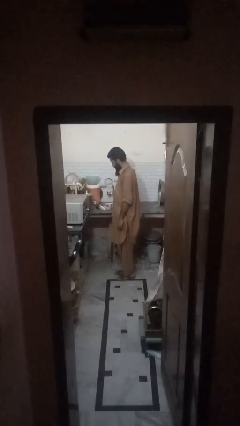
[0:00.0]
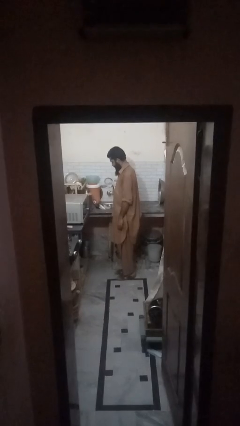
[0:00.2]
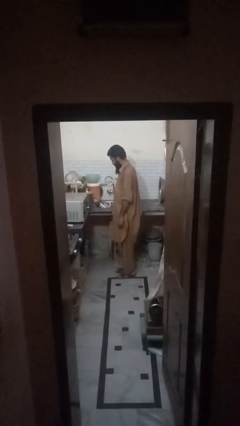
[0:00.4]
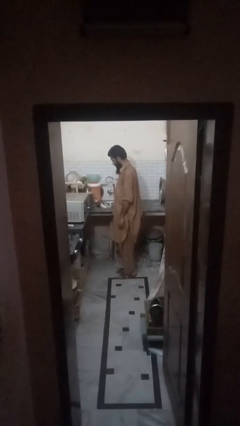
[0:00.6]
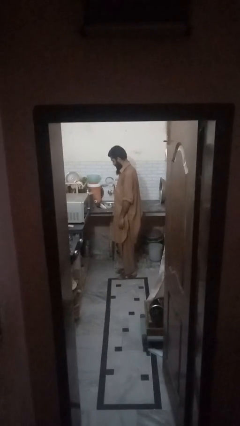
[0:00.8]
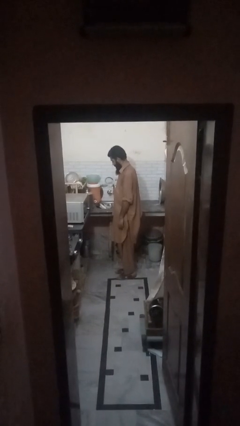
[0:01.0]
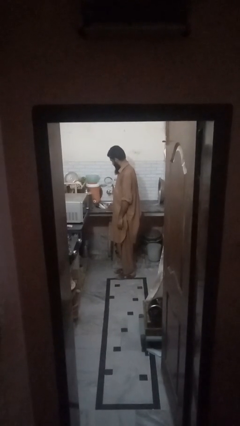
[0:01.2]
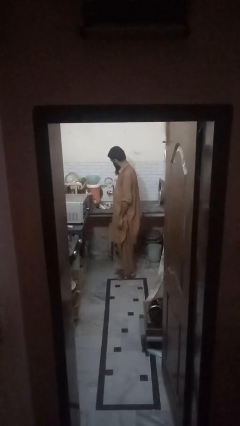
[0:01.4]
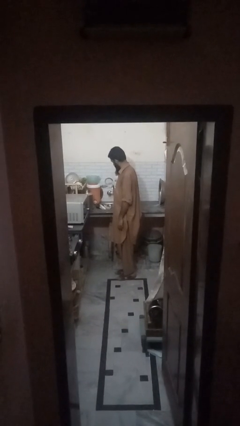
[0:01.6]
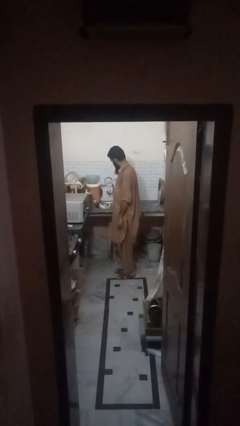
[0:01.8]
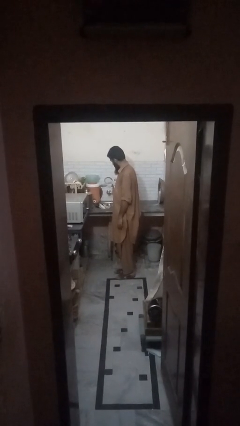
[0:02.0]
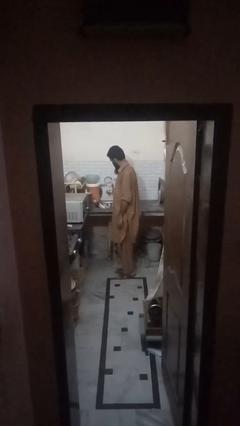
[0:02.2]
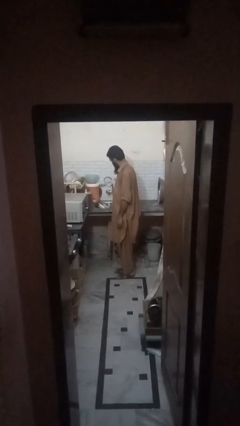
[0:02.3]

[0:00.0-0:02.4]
person closes dishwasher

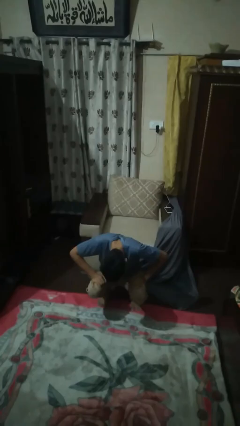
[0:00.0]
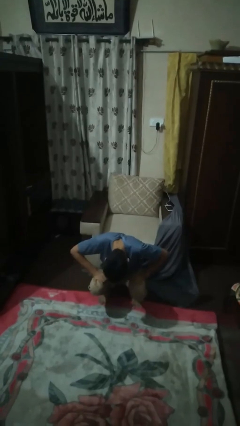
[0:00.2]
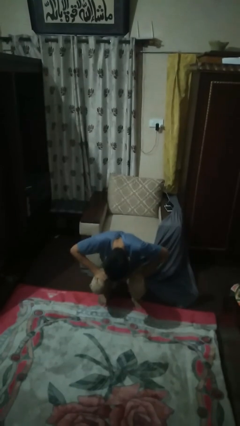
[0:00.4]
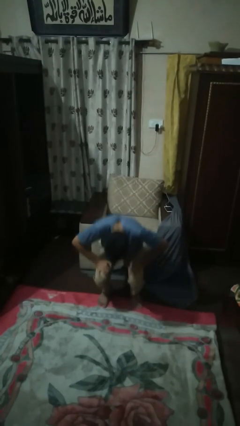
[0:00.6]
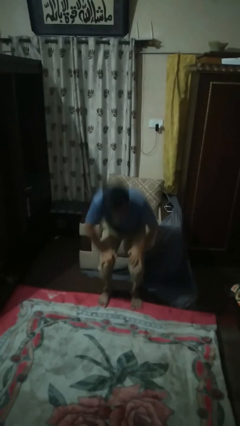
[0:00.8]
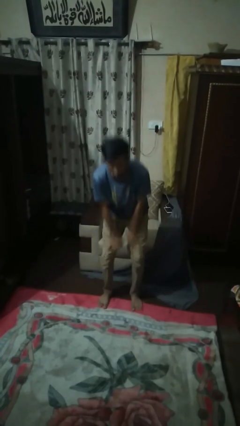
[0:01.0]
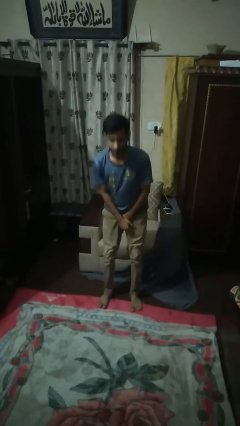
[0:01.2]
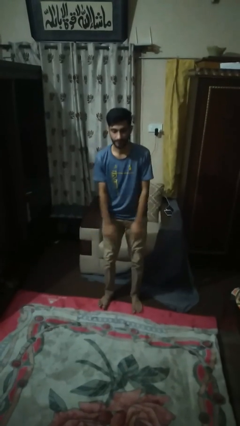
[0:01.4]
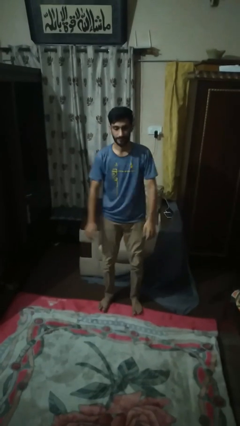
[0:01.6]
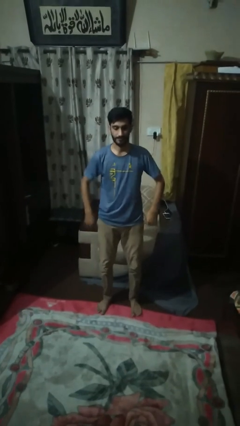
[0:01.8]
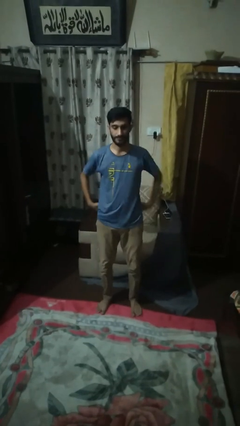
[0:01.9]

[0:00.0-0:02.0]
person stands up

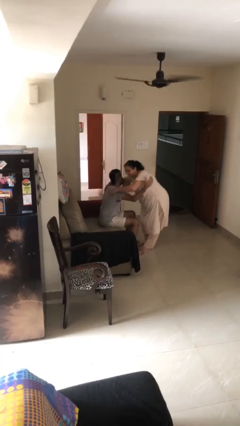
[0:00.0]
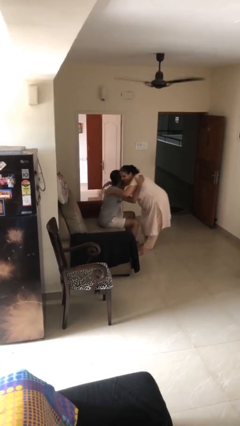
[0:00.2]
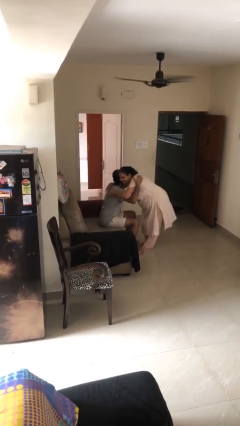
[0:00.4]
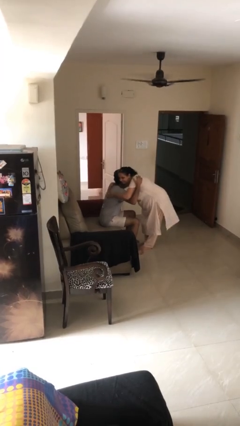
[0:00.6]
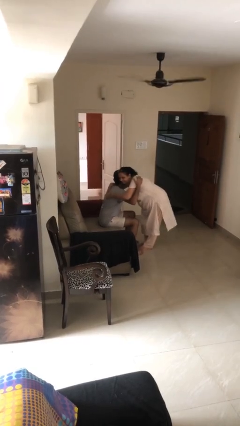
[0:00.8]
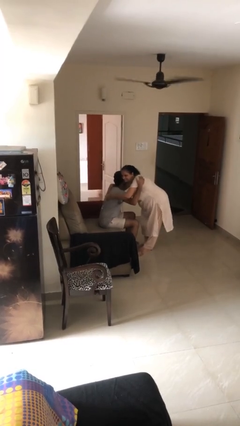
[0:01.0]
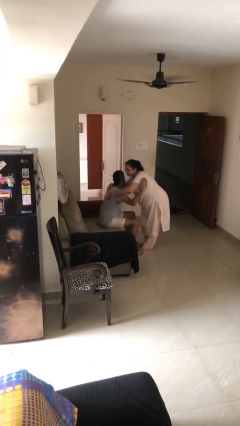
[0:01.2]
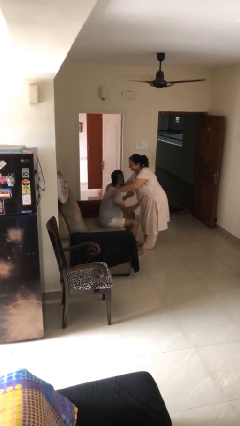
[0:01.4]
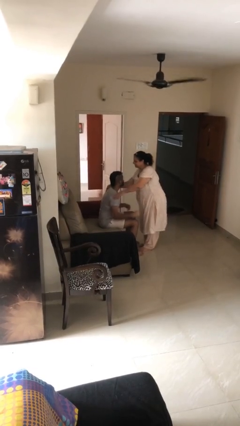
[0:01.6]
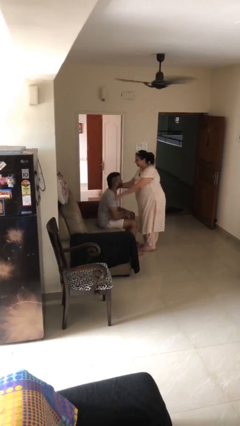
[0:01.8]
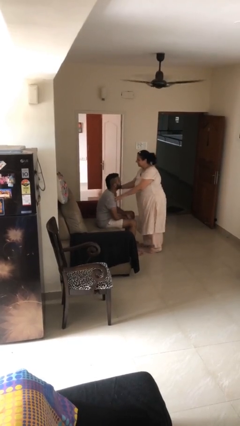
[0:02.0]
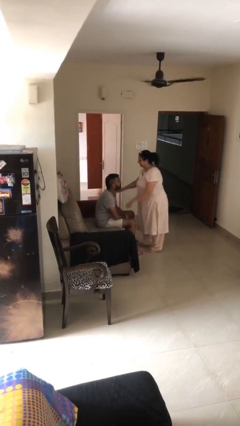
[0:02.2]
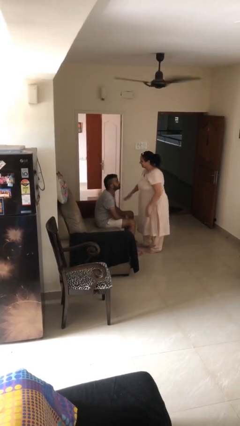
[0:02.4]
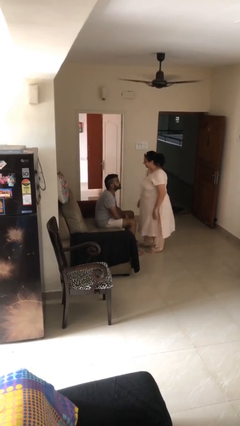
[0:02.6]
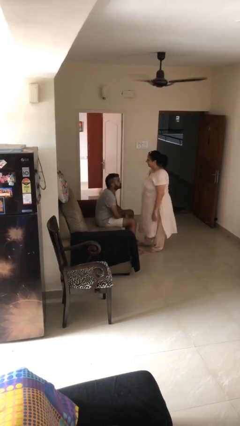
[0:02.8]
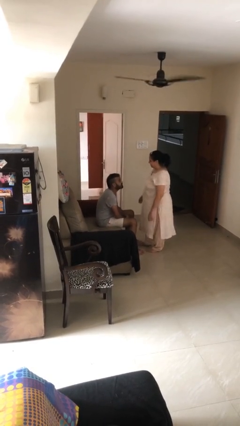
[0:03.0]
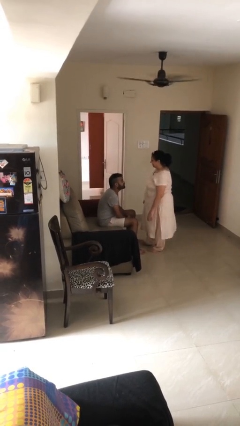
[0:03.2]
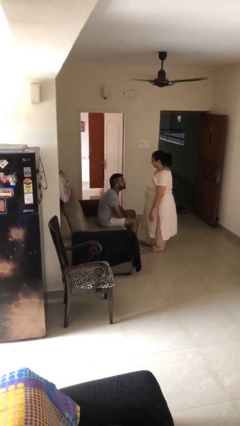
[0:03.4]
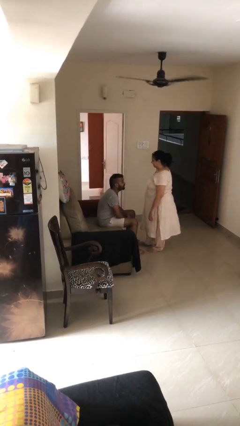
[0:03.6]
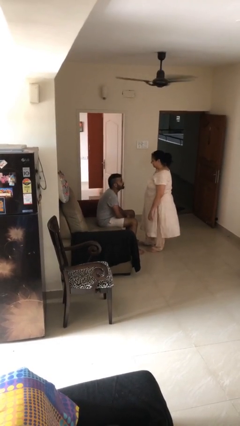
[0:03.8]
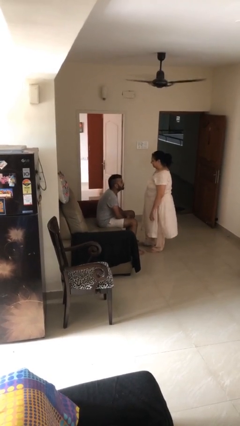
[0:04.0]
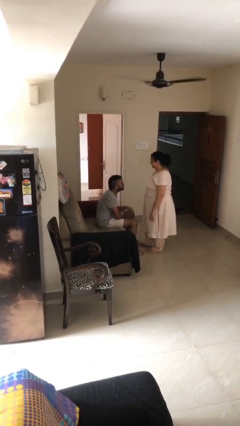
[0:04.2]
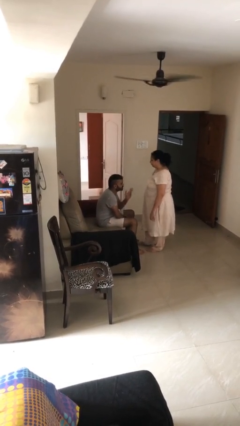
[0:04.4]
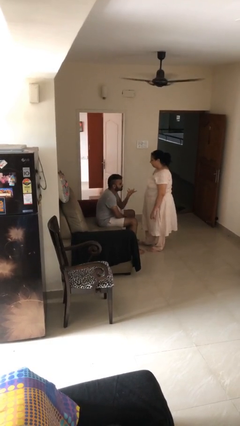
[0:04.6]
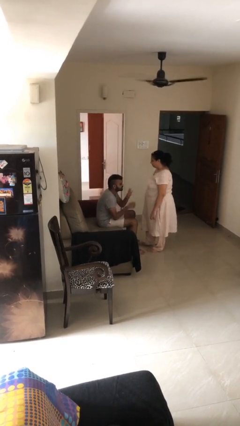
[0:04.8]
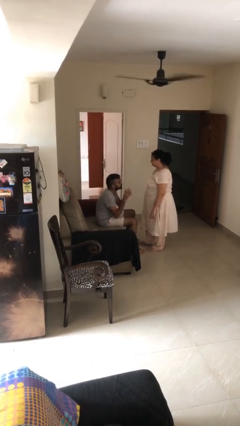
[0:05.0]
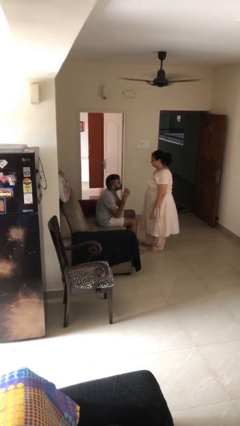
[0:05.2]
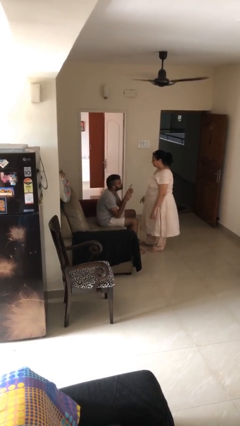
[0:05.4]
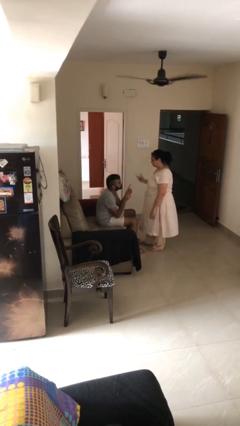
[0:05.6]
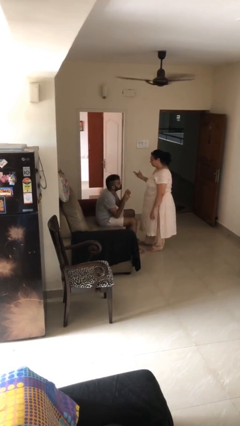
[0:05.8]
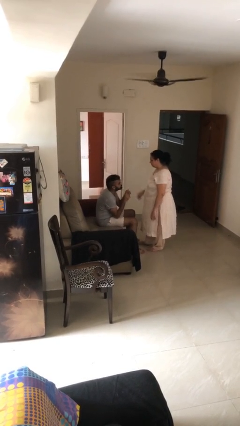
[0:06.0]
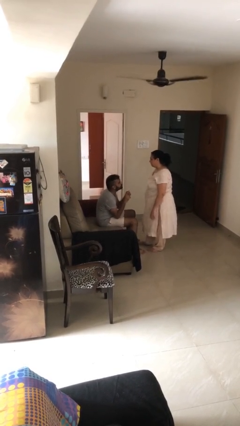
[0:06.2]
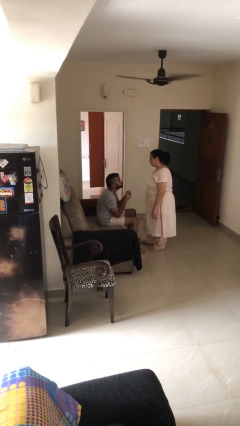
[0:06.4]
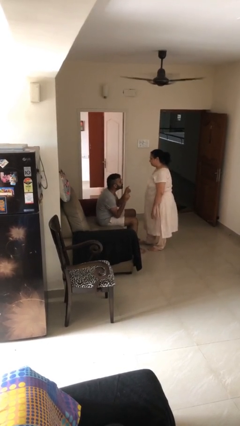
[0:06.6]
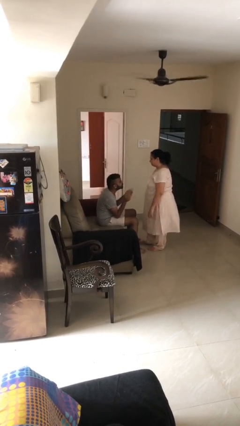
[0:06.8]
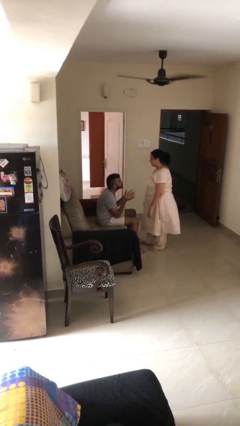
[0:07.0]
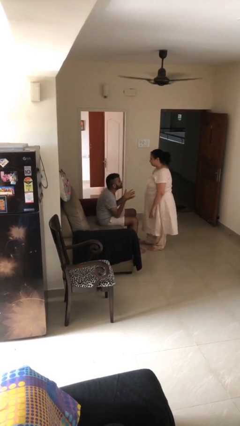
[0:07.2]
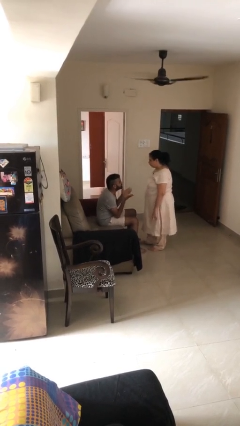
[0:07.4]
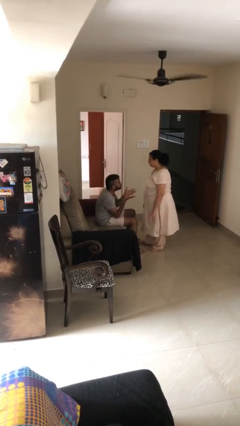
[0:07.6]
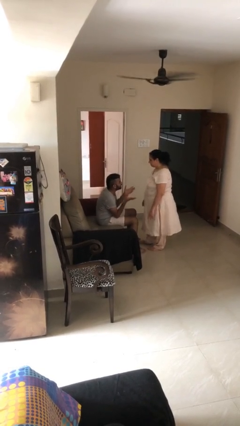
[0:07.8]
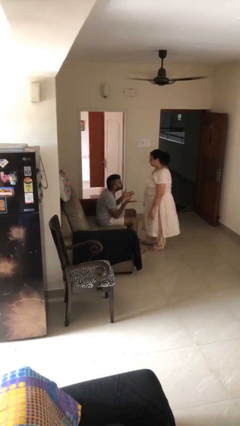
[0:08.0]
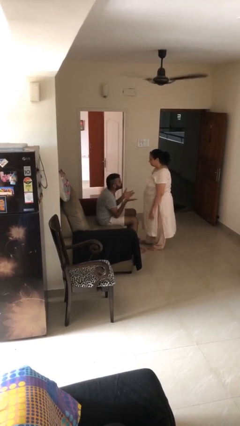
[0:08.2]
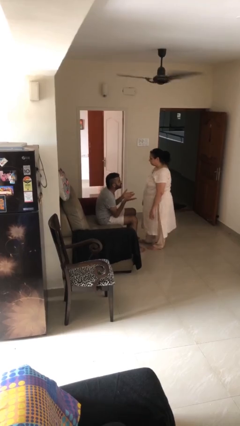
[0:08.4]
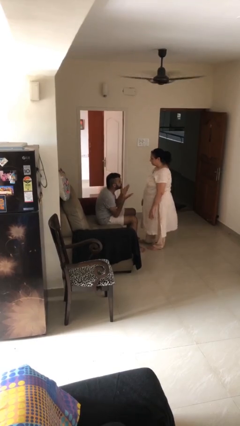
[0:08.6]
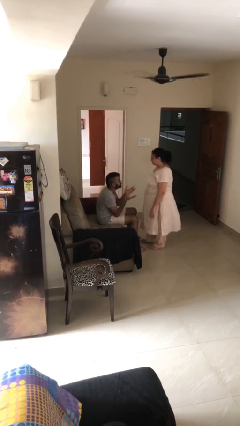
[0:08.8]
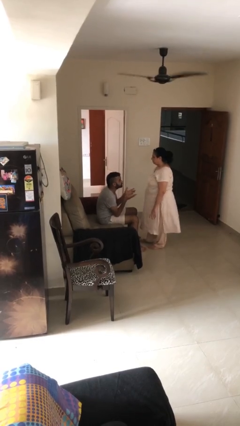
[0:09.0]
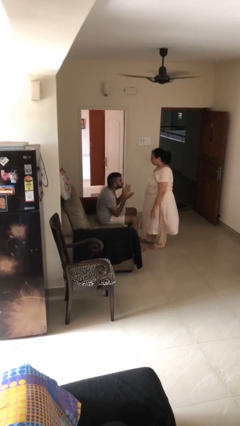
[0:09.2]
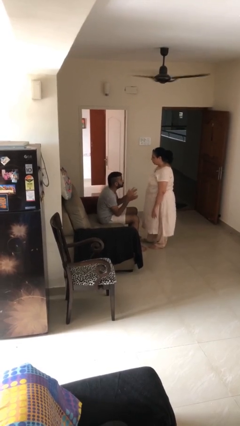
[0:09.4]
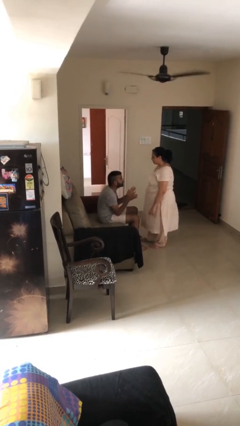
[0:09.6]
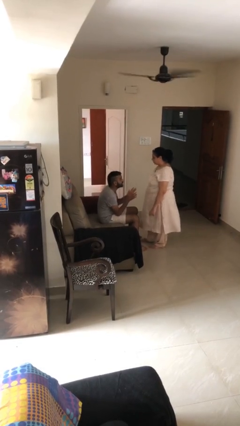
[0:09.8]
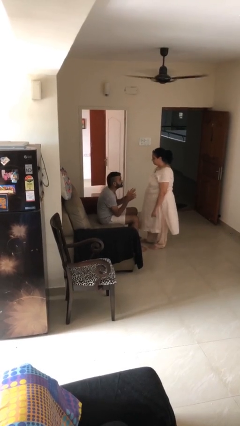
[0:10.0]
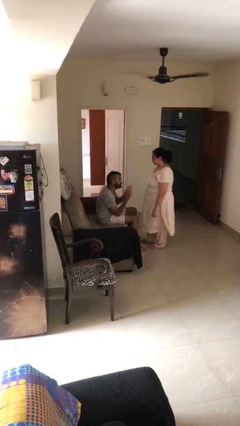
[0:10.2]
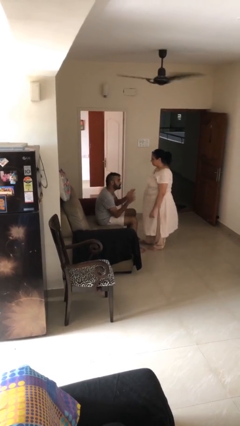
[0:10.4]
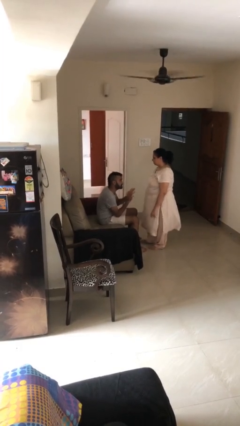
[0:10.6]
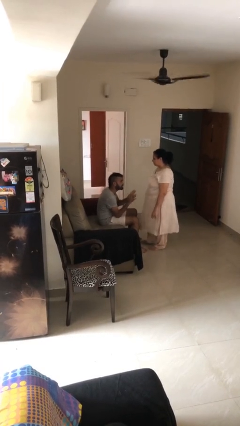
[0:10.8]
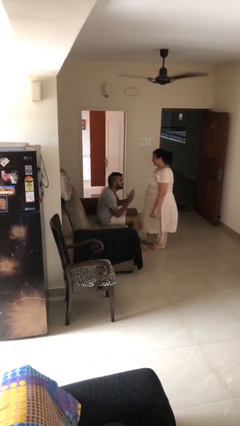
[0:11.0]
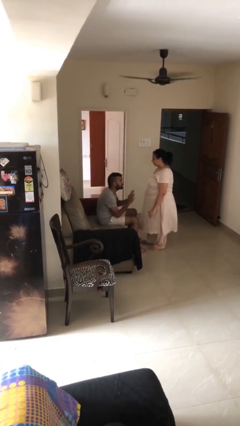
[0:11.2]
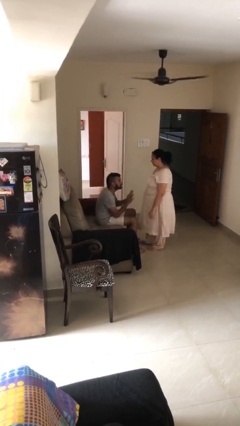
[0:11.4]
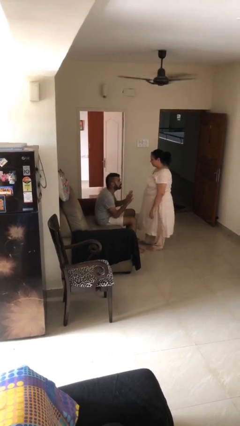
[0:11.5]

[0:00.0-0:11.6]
person embraces person

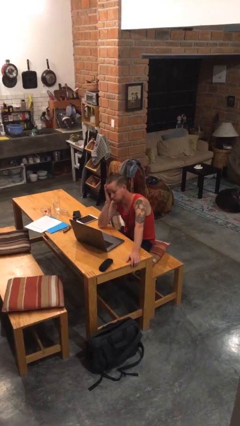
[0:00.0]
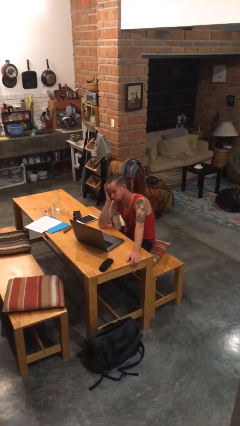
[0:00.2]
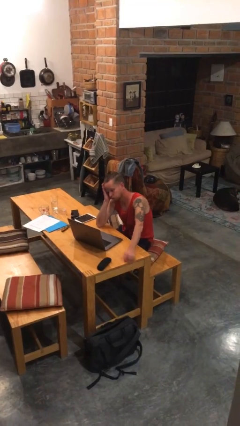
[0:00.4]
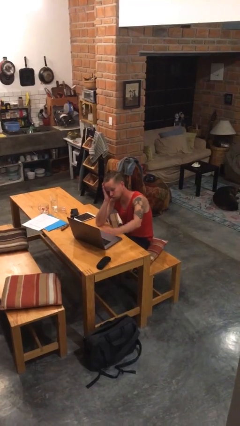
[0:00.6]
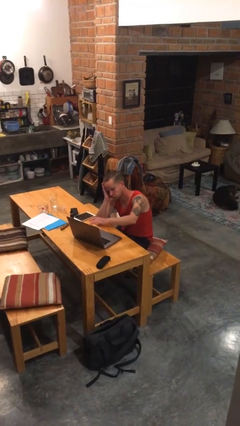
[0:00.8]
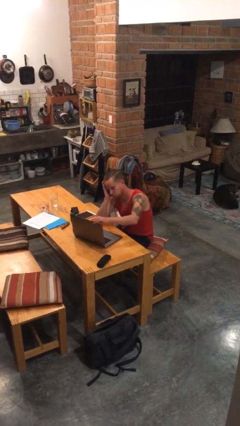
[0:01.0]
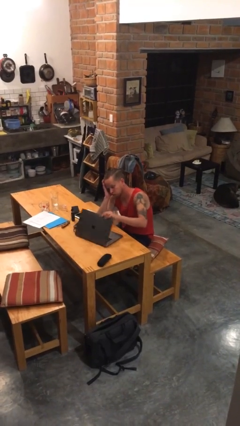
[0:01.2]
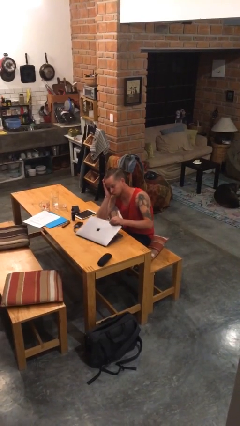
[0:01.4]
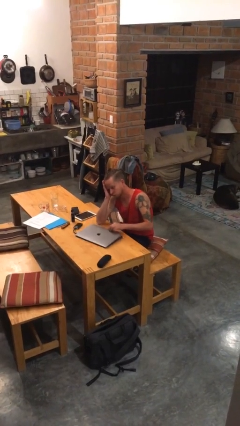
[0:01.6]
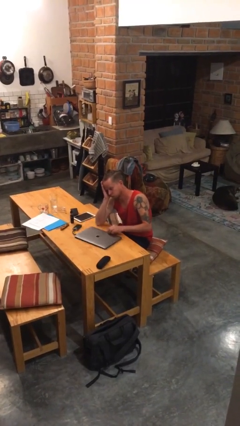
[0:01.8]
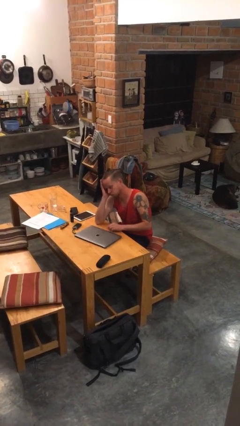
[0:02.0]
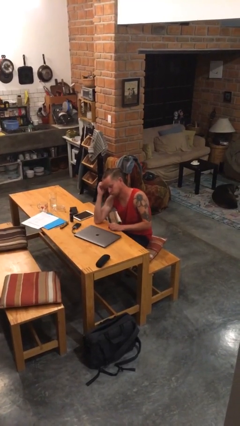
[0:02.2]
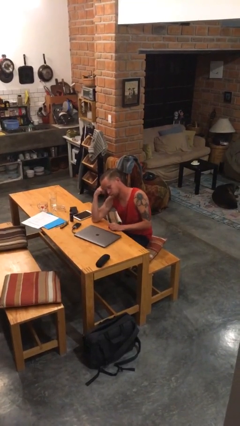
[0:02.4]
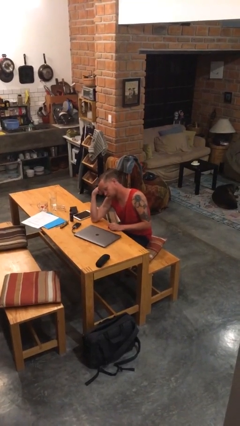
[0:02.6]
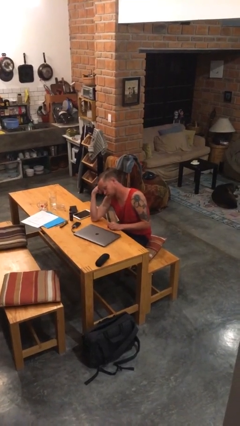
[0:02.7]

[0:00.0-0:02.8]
person closes laptop
